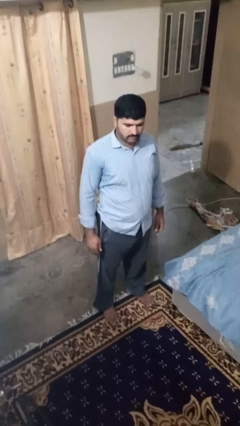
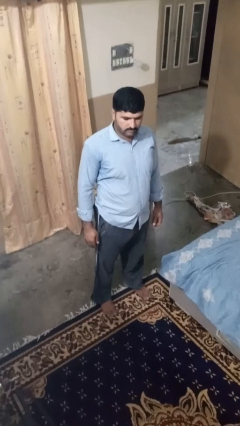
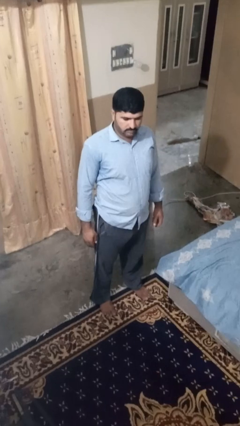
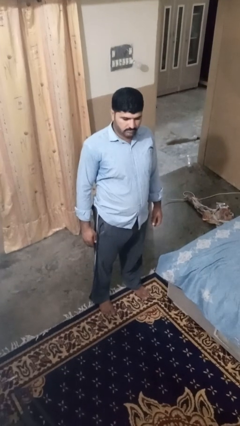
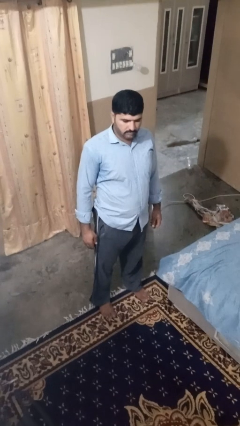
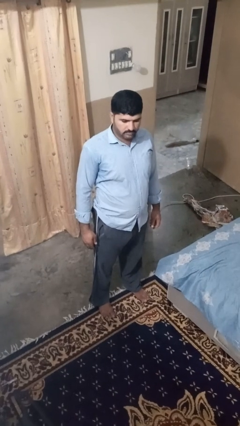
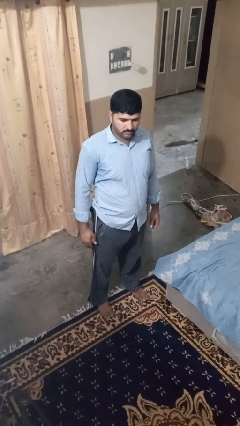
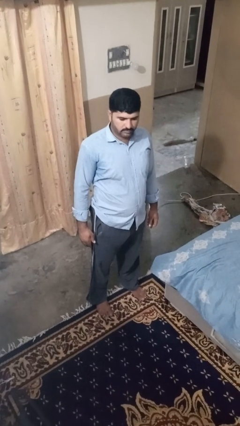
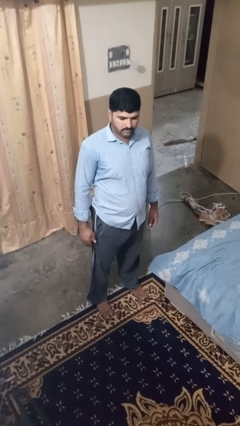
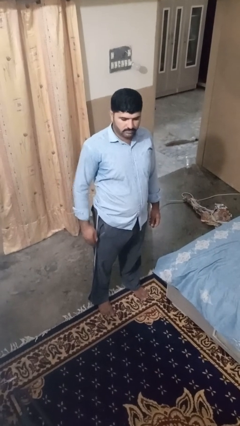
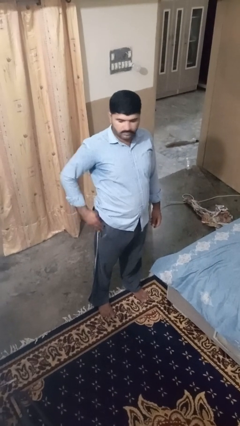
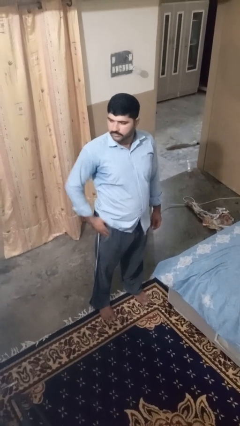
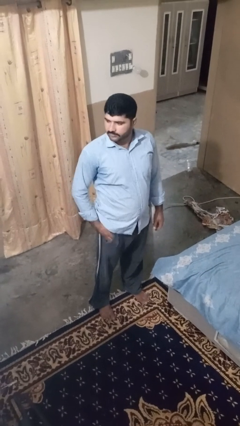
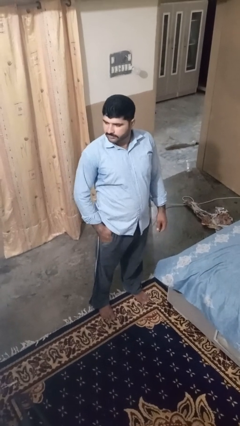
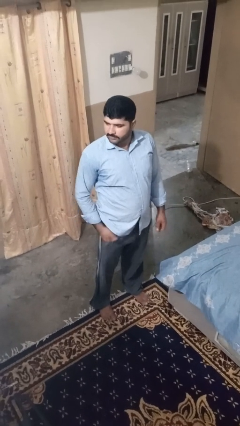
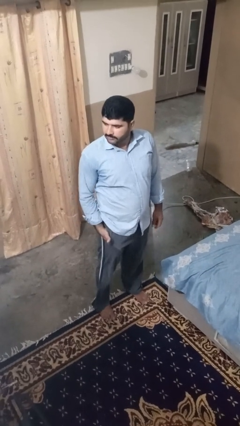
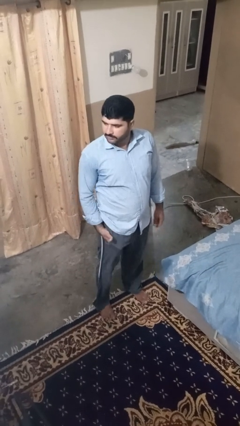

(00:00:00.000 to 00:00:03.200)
person puts hands in back pockets

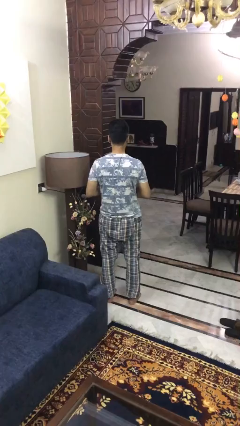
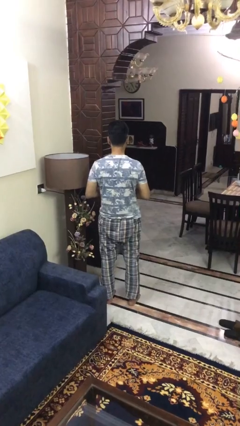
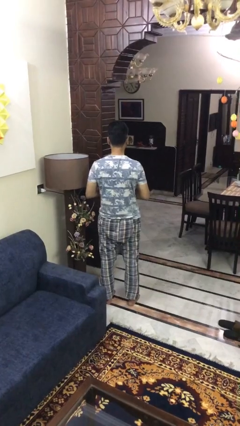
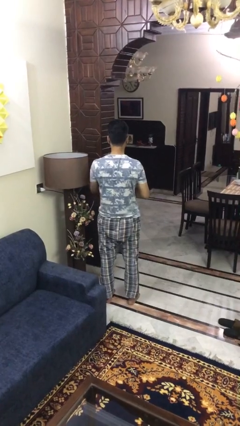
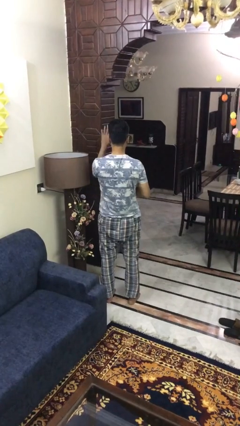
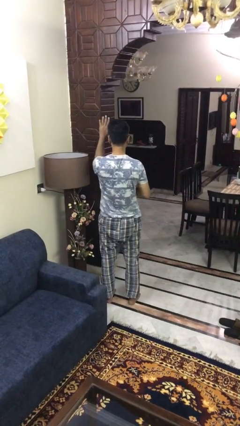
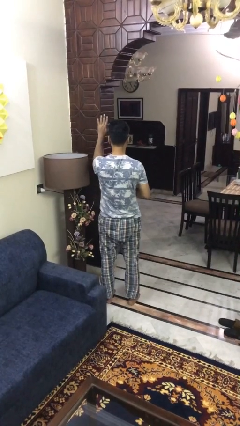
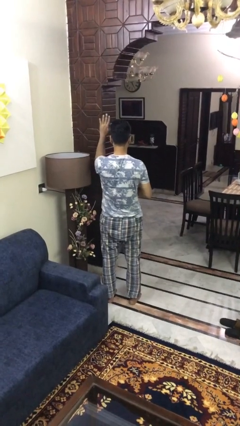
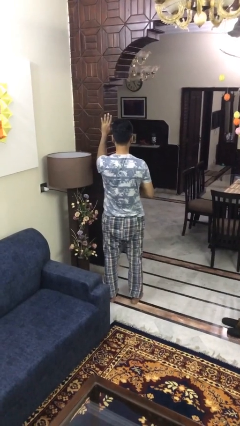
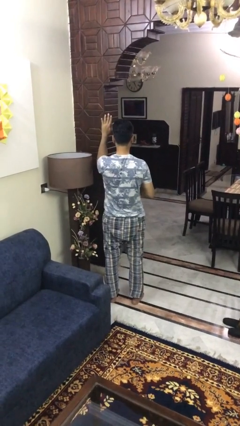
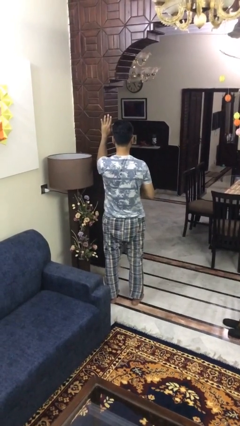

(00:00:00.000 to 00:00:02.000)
person gestures raise hand

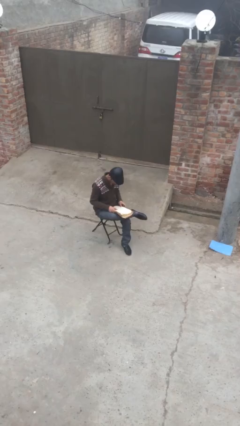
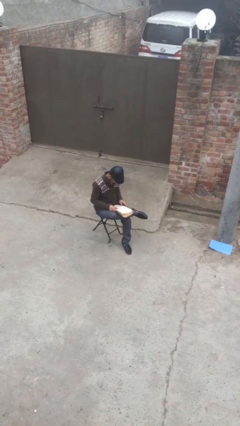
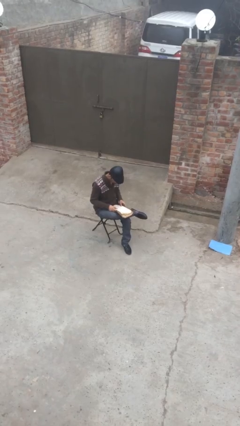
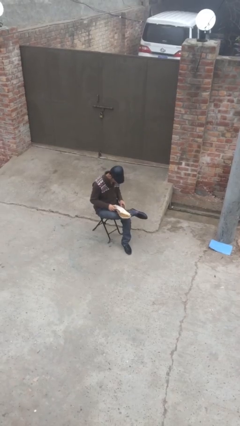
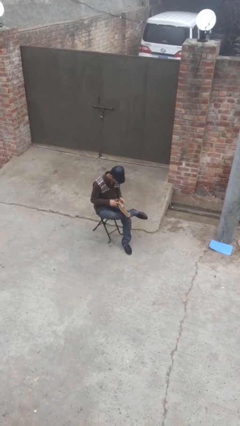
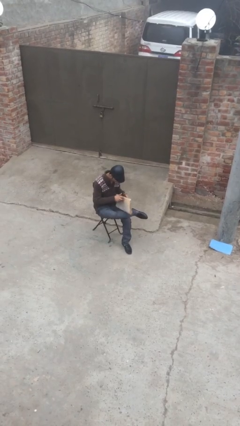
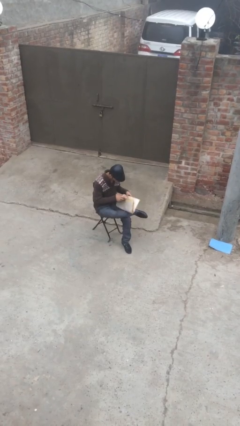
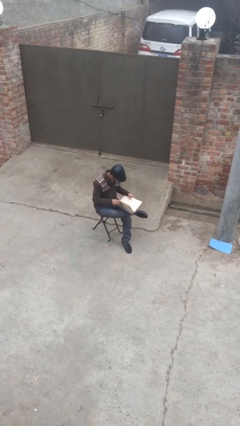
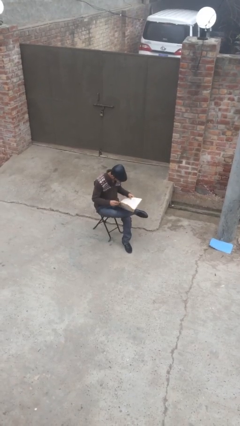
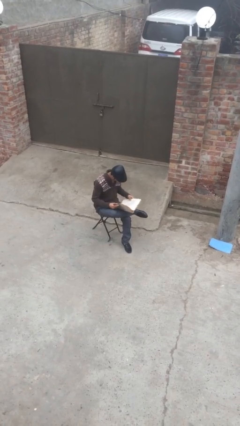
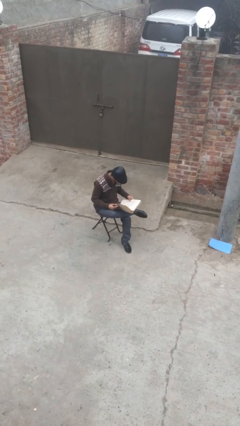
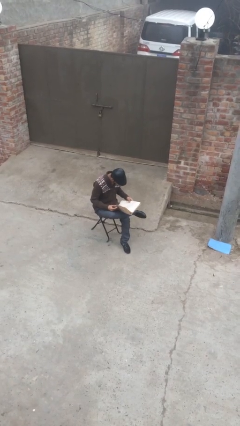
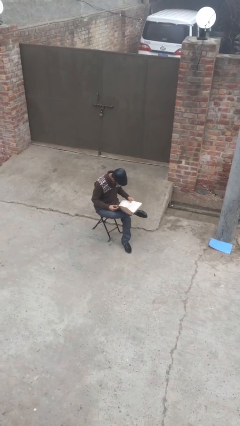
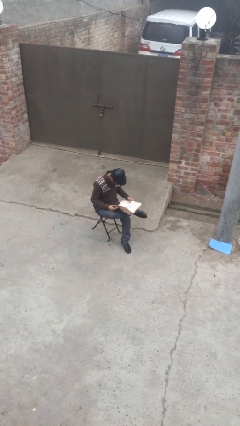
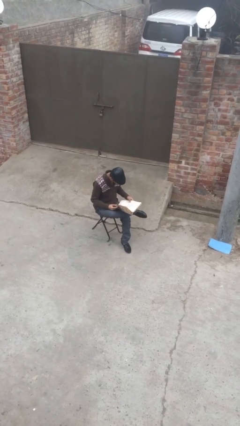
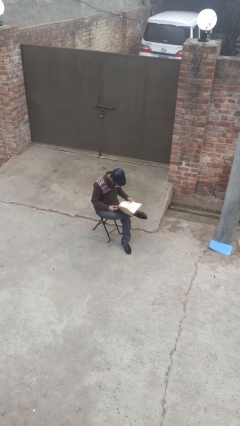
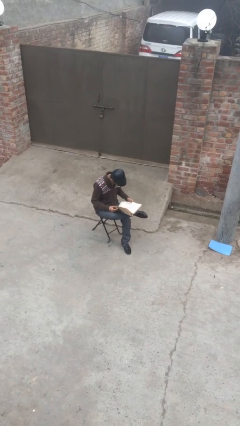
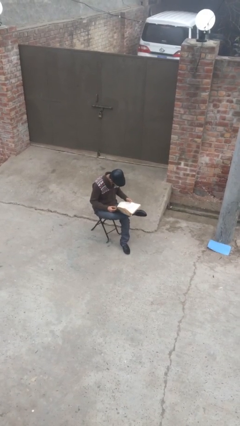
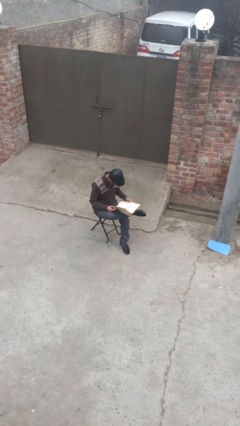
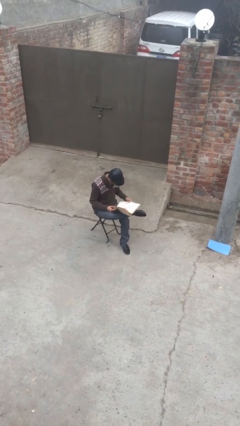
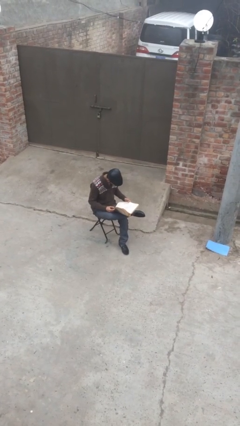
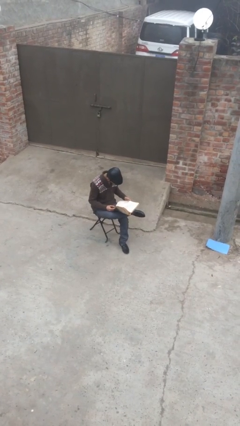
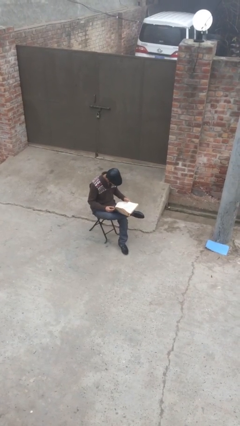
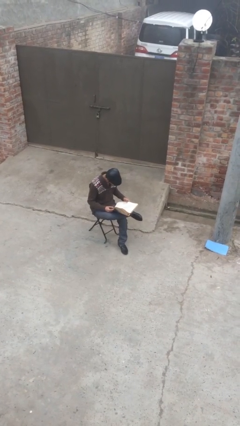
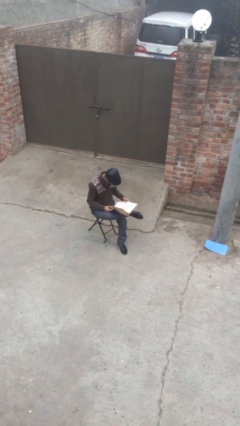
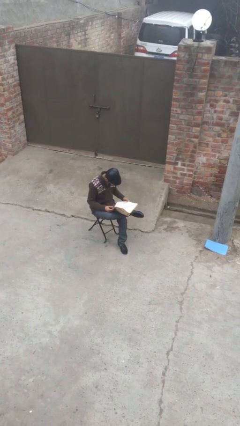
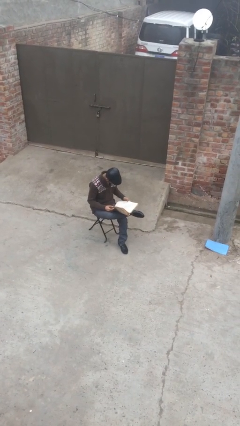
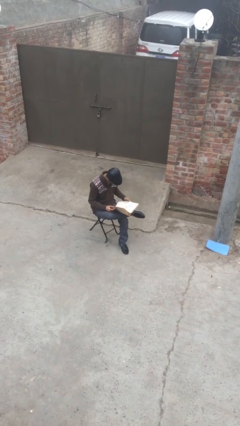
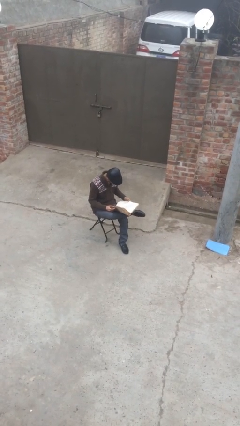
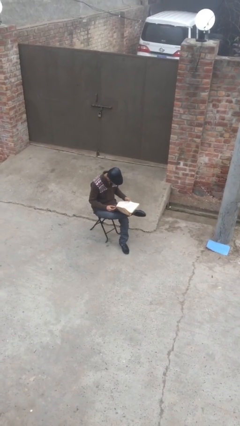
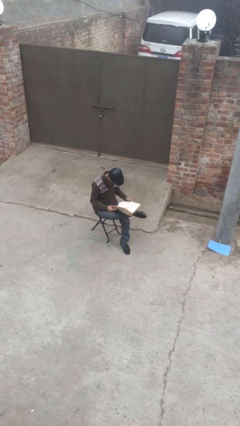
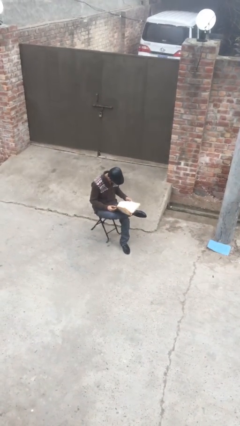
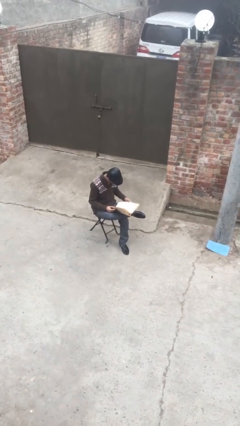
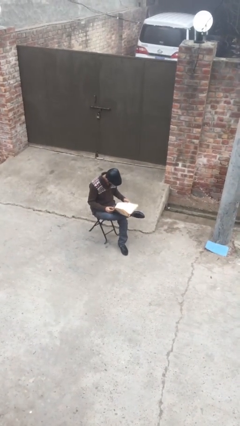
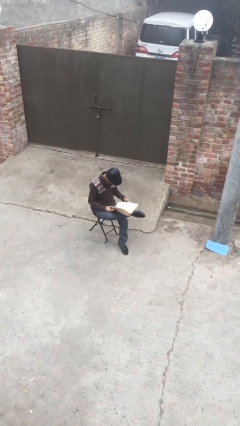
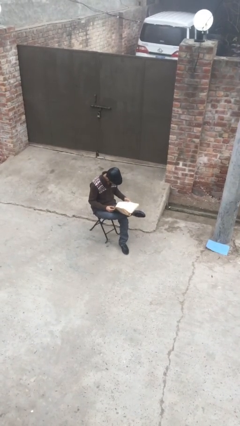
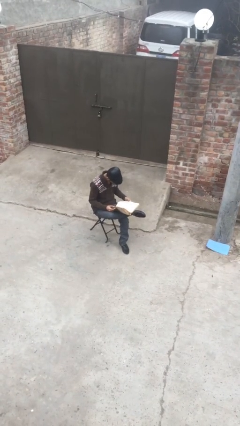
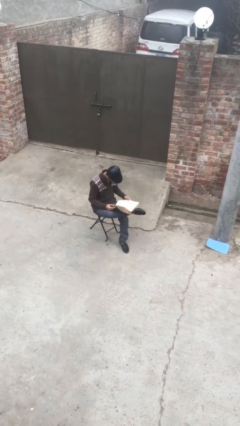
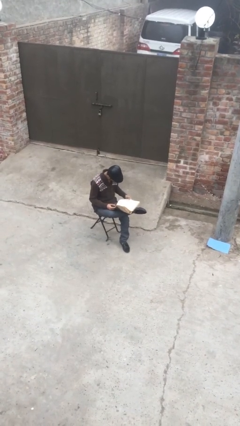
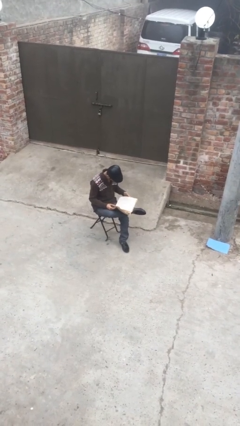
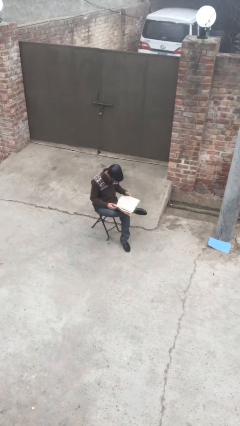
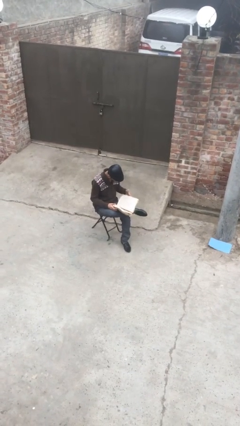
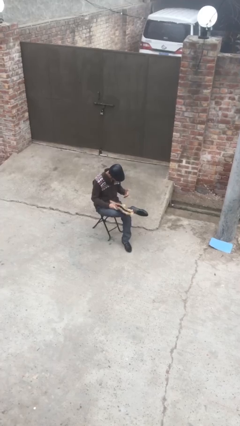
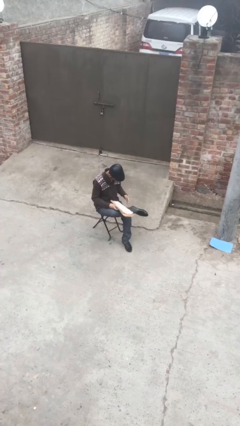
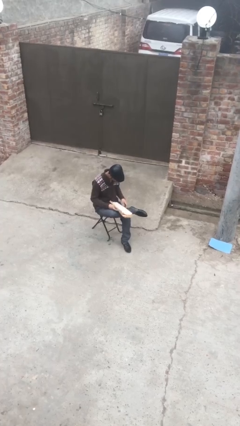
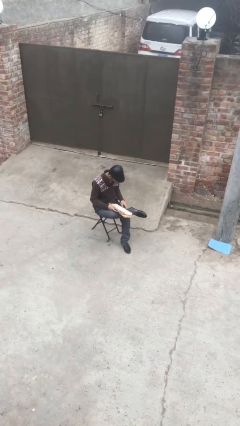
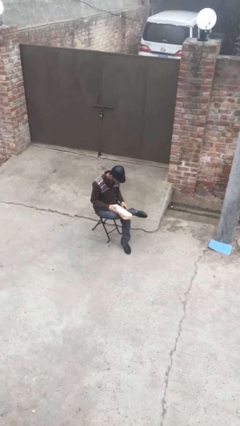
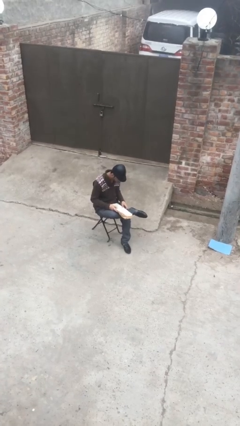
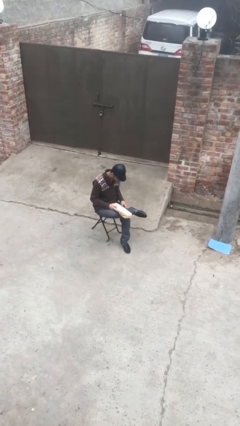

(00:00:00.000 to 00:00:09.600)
person reads document

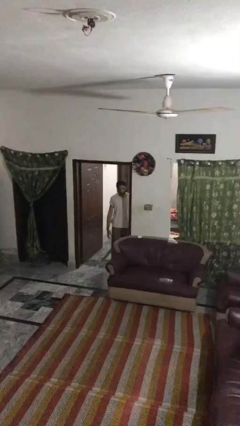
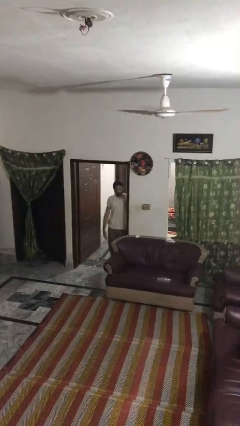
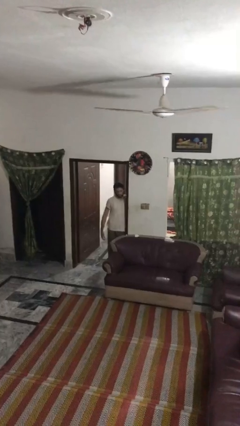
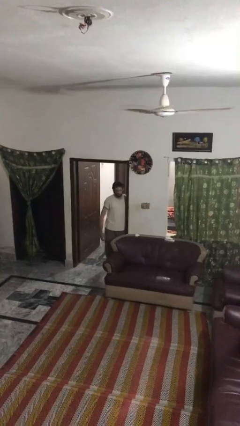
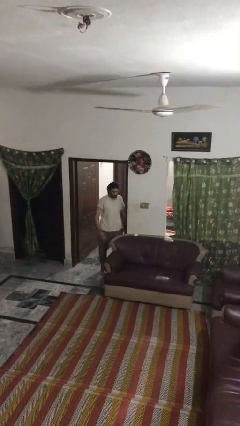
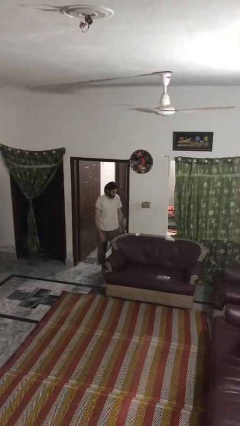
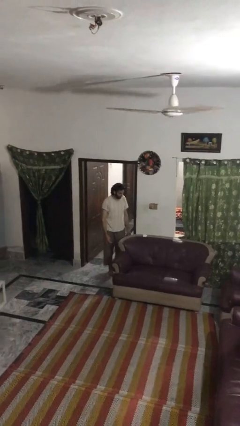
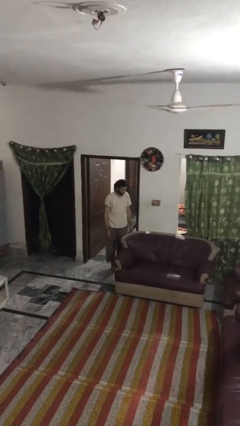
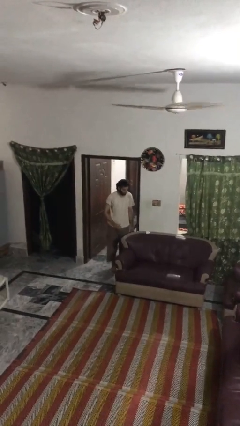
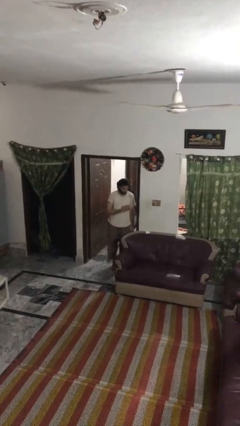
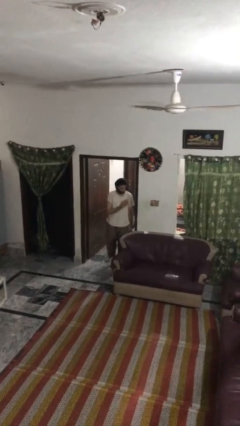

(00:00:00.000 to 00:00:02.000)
person bumps into wall

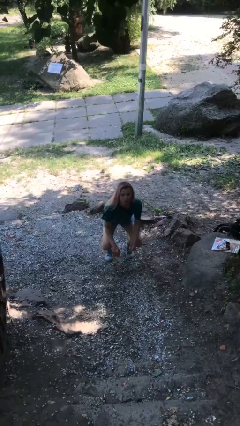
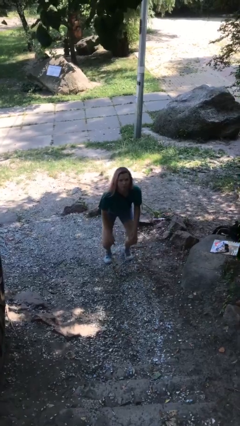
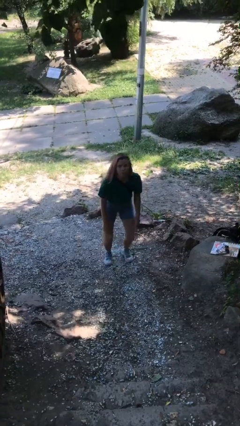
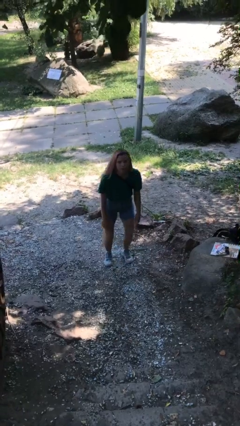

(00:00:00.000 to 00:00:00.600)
person stands up
